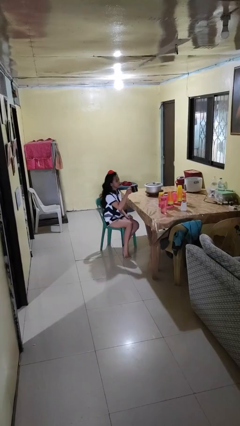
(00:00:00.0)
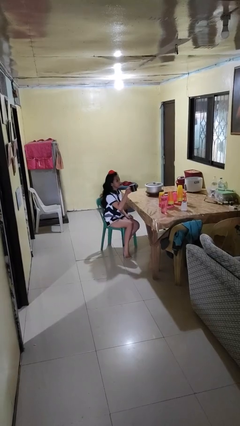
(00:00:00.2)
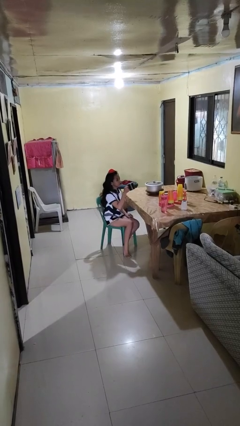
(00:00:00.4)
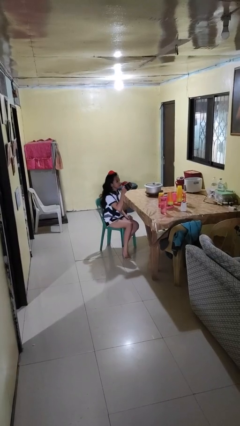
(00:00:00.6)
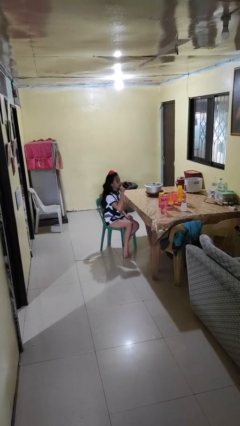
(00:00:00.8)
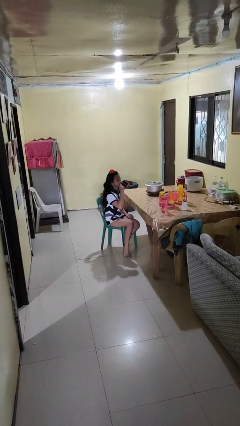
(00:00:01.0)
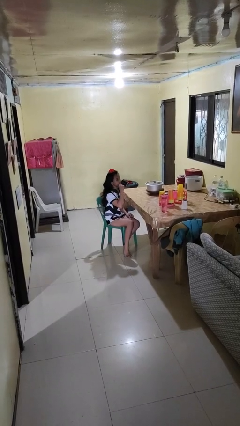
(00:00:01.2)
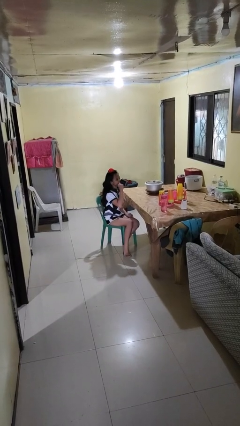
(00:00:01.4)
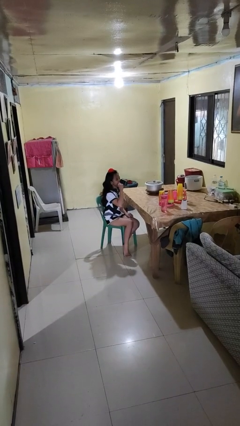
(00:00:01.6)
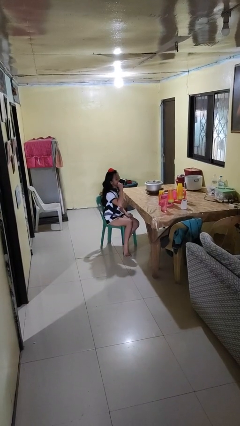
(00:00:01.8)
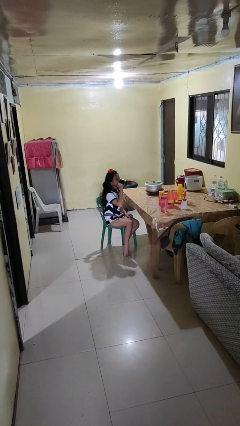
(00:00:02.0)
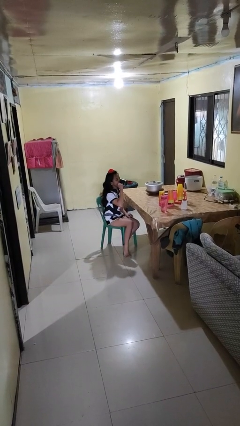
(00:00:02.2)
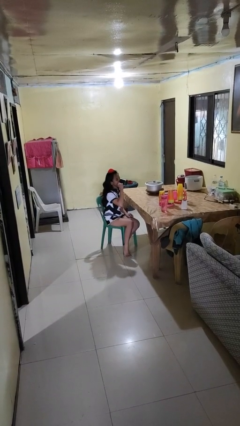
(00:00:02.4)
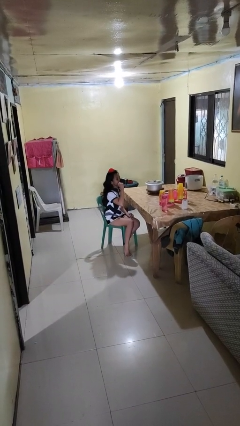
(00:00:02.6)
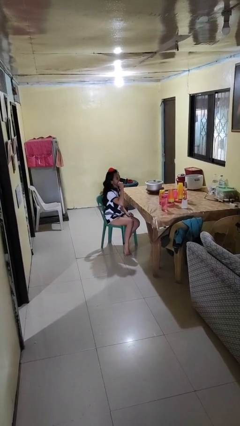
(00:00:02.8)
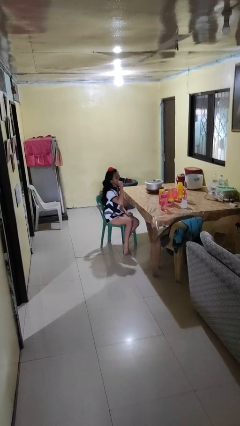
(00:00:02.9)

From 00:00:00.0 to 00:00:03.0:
person drinks from mug

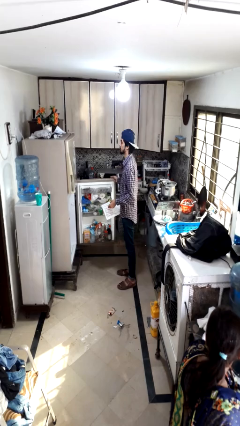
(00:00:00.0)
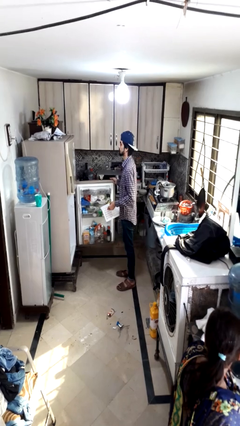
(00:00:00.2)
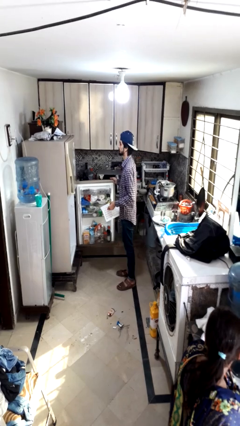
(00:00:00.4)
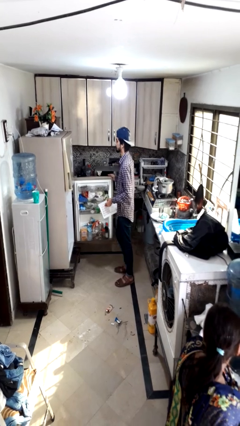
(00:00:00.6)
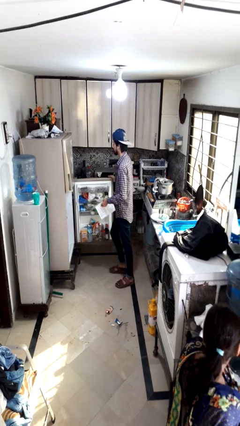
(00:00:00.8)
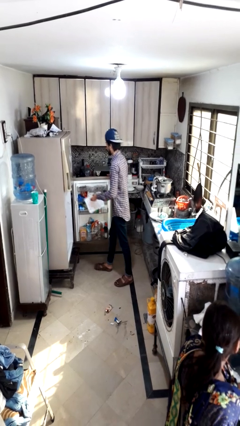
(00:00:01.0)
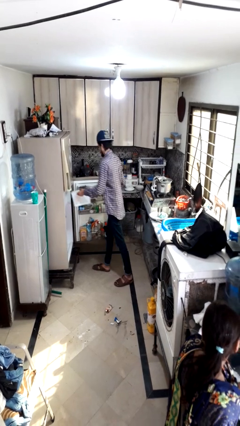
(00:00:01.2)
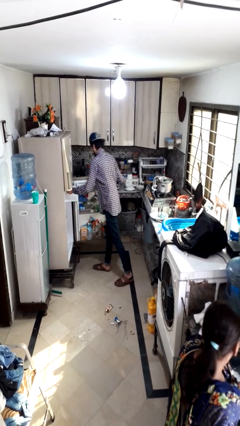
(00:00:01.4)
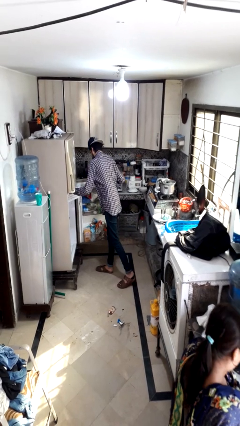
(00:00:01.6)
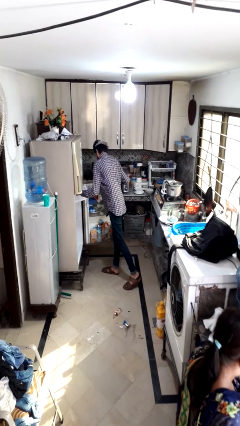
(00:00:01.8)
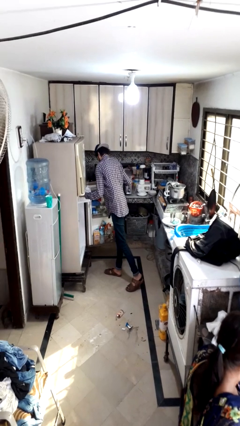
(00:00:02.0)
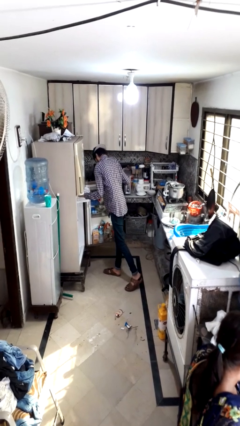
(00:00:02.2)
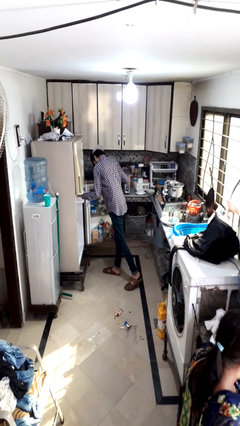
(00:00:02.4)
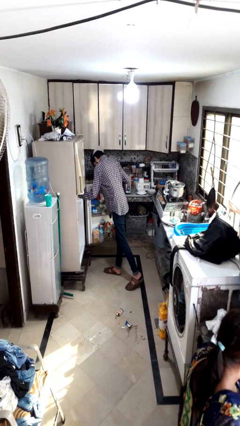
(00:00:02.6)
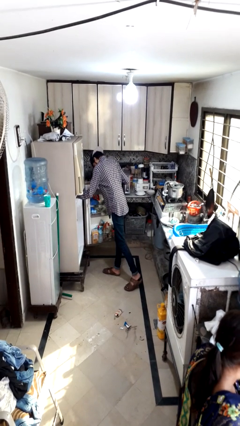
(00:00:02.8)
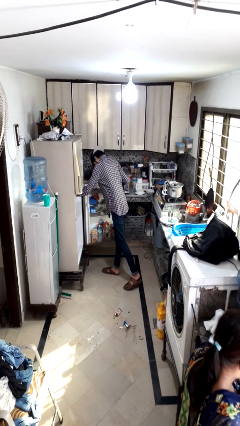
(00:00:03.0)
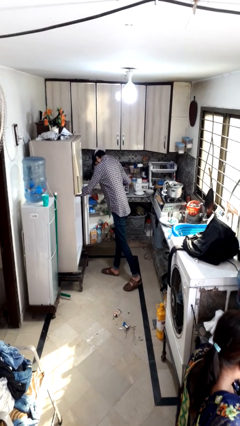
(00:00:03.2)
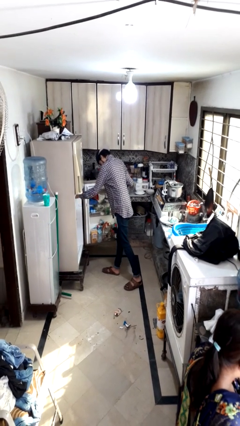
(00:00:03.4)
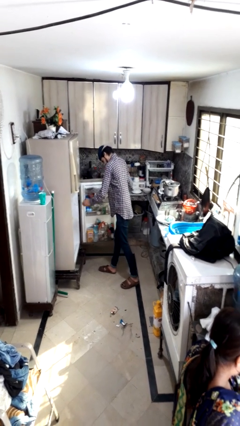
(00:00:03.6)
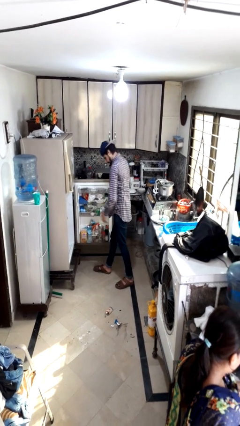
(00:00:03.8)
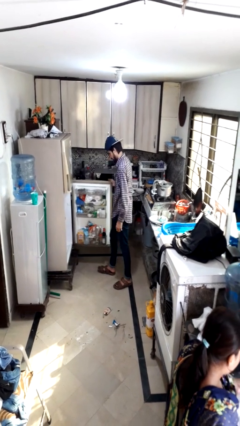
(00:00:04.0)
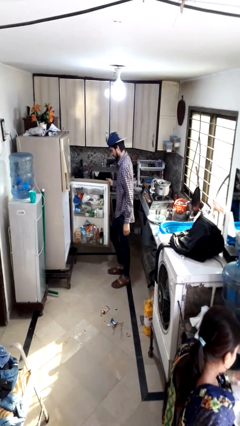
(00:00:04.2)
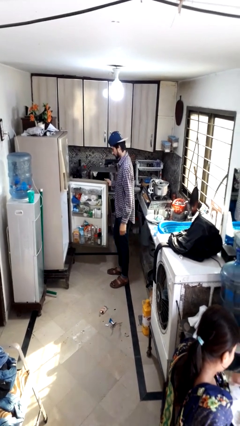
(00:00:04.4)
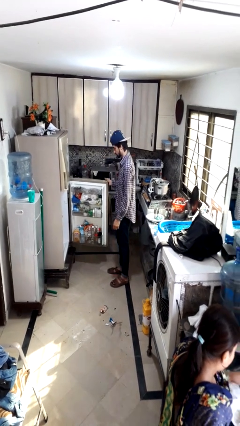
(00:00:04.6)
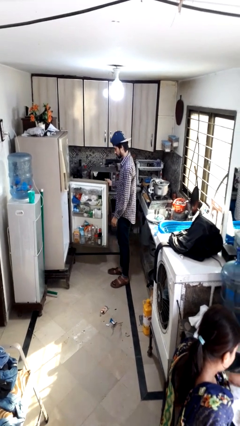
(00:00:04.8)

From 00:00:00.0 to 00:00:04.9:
person puts object into refrigerator

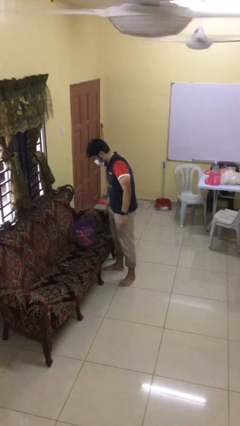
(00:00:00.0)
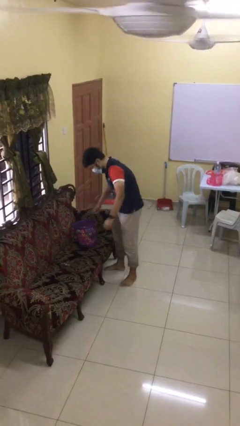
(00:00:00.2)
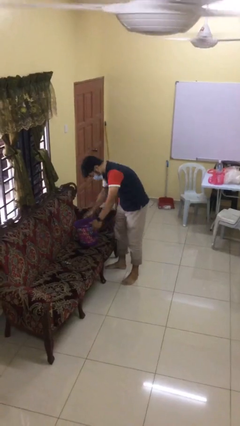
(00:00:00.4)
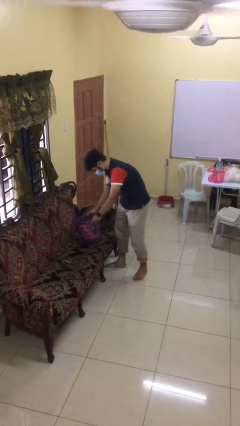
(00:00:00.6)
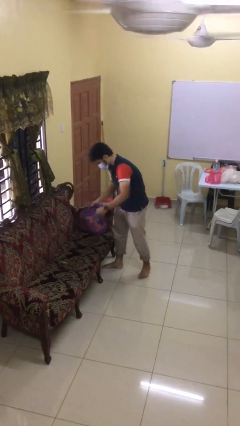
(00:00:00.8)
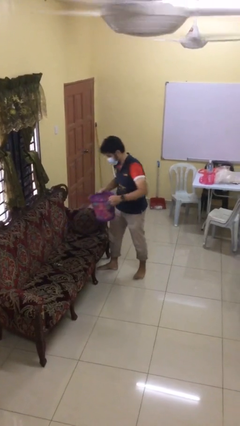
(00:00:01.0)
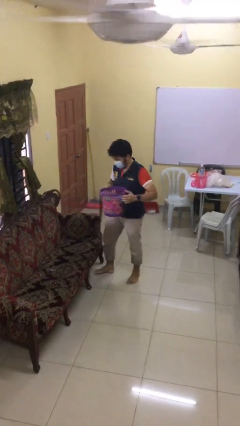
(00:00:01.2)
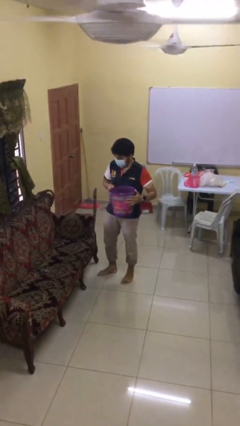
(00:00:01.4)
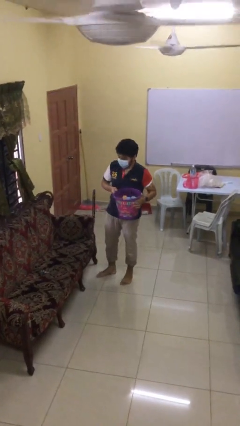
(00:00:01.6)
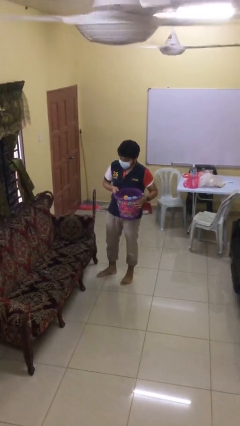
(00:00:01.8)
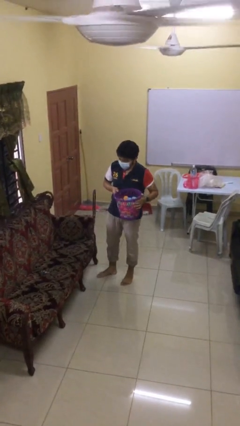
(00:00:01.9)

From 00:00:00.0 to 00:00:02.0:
person picks up object from couch

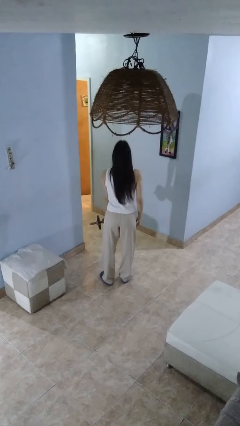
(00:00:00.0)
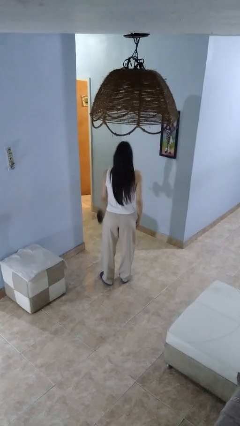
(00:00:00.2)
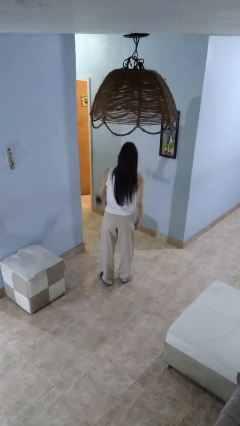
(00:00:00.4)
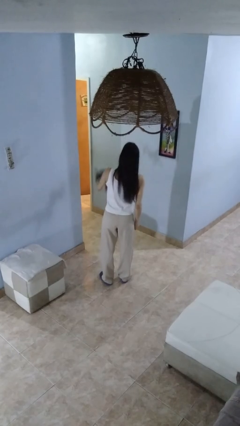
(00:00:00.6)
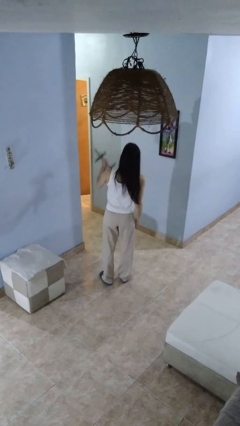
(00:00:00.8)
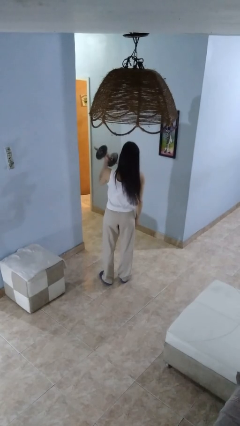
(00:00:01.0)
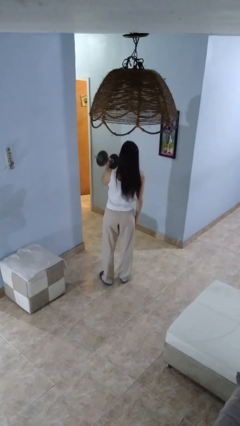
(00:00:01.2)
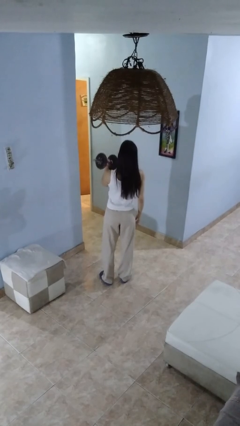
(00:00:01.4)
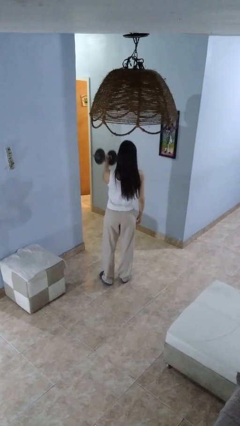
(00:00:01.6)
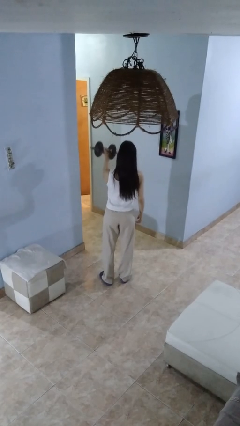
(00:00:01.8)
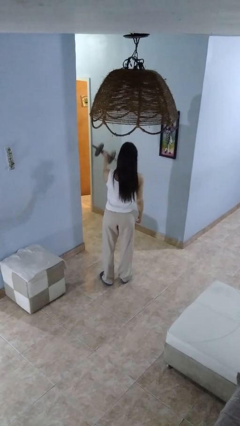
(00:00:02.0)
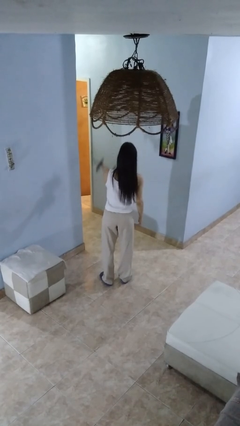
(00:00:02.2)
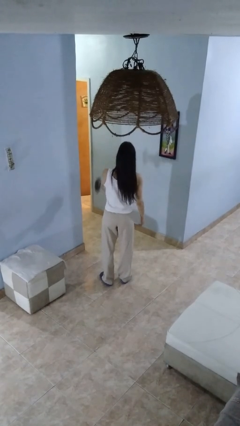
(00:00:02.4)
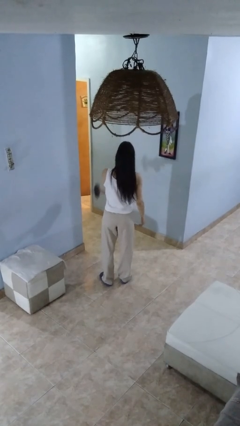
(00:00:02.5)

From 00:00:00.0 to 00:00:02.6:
person lifts dumbbells

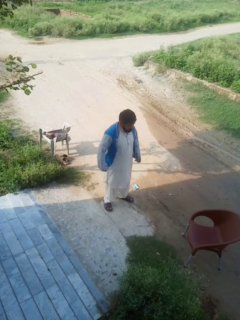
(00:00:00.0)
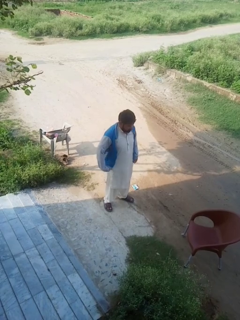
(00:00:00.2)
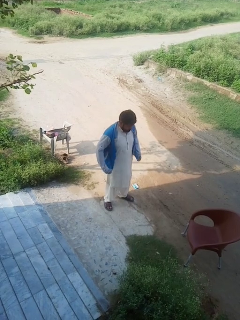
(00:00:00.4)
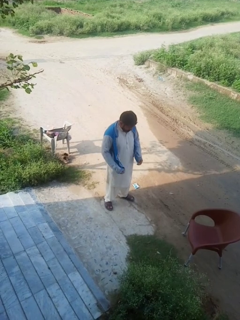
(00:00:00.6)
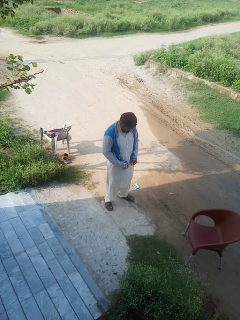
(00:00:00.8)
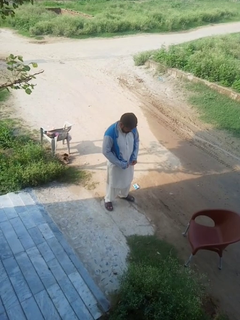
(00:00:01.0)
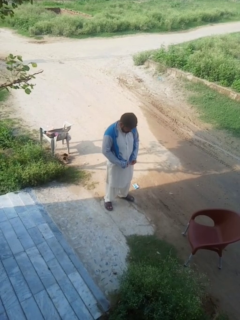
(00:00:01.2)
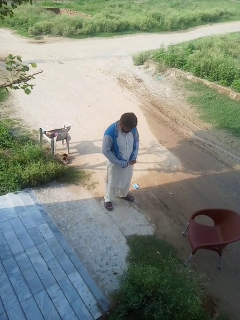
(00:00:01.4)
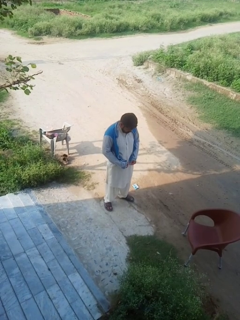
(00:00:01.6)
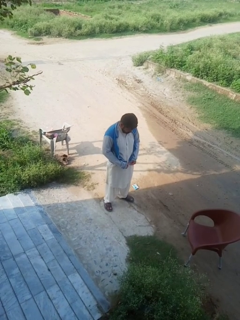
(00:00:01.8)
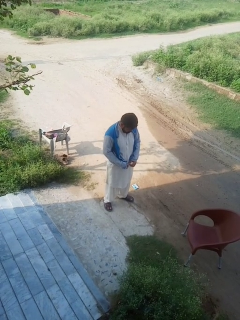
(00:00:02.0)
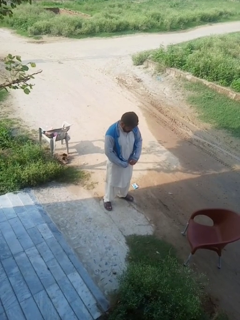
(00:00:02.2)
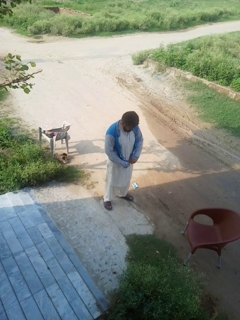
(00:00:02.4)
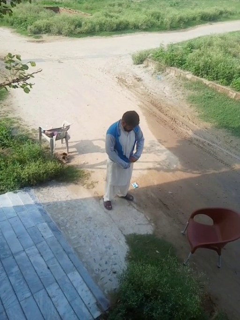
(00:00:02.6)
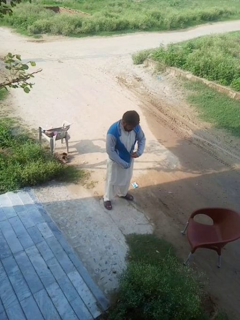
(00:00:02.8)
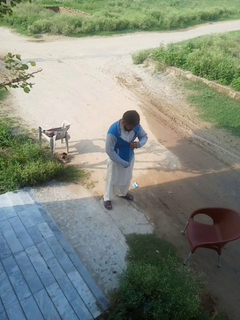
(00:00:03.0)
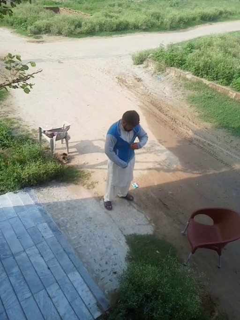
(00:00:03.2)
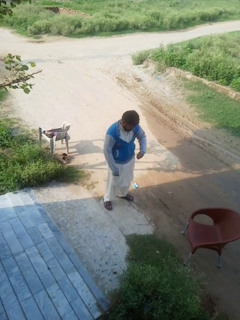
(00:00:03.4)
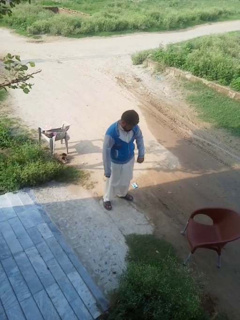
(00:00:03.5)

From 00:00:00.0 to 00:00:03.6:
person zips up jacket

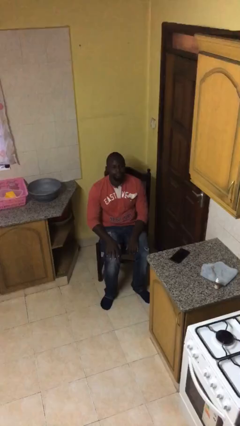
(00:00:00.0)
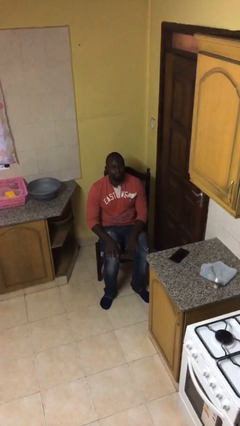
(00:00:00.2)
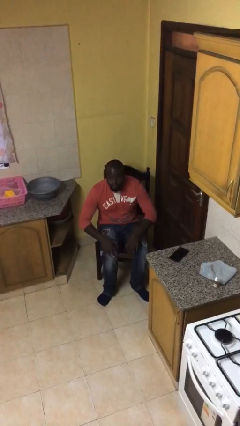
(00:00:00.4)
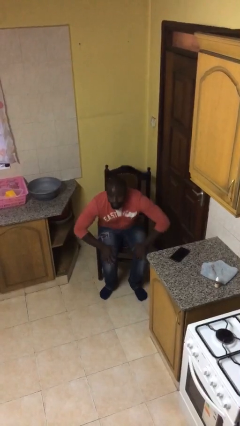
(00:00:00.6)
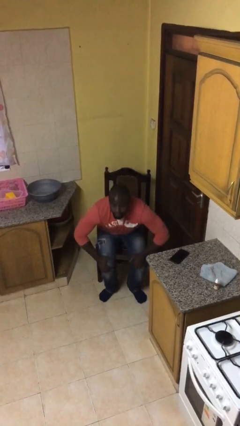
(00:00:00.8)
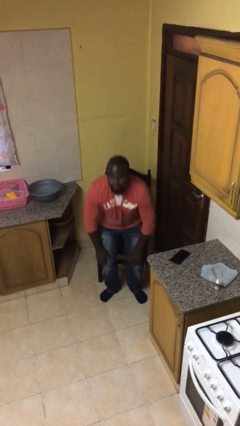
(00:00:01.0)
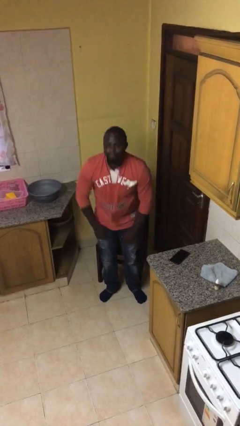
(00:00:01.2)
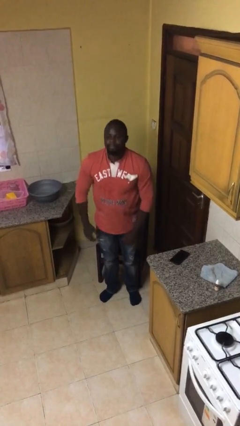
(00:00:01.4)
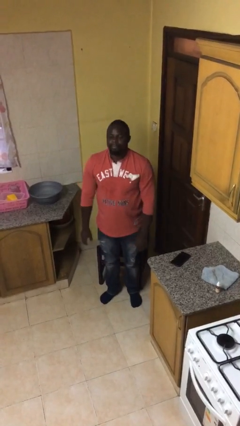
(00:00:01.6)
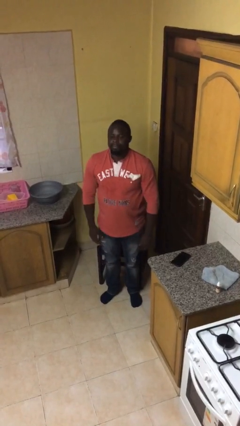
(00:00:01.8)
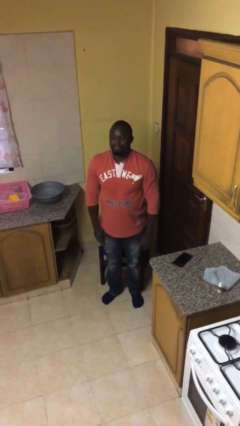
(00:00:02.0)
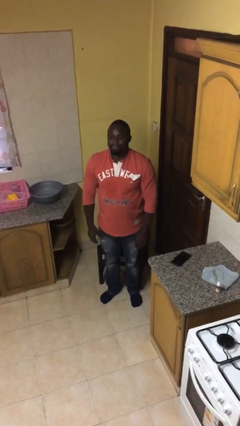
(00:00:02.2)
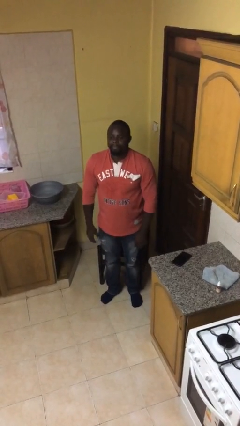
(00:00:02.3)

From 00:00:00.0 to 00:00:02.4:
person stands up
